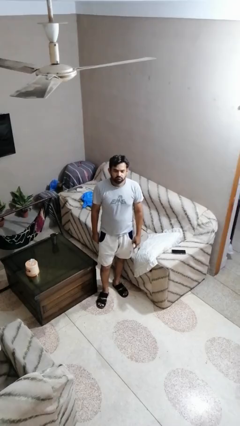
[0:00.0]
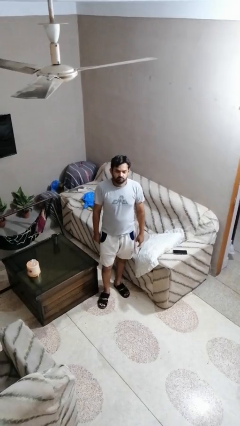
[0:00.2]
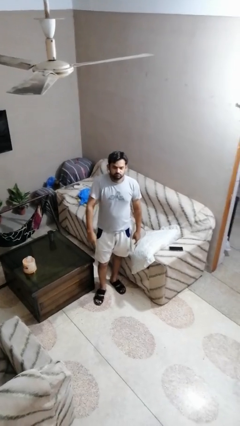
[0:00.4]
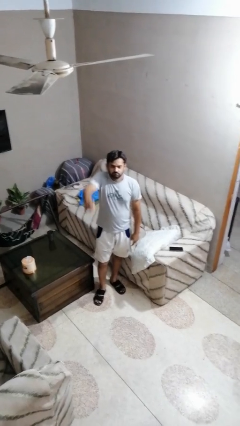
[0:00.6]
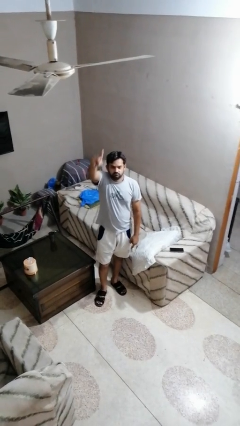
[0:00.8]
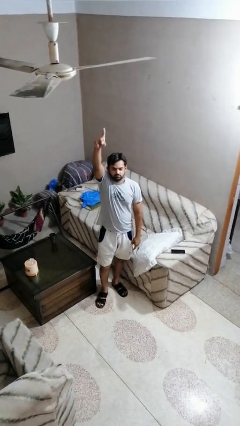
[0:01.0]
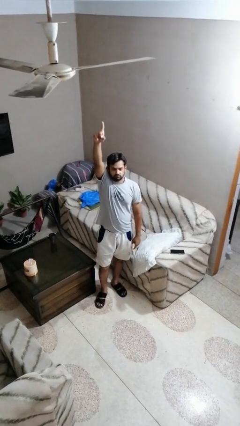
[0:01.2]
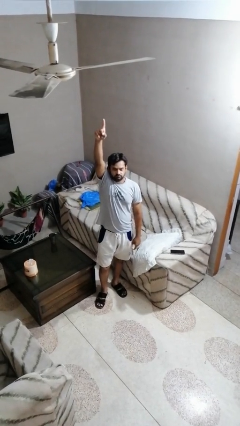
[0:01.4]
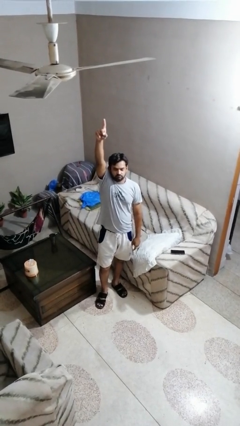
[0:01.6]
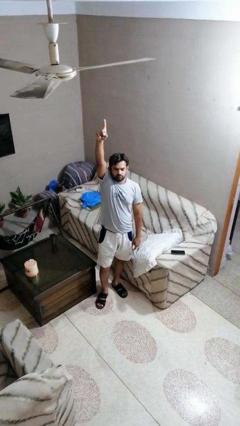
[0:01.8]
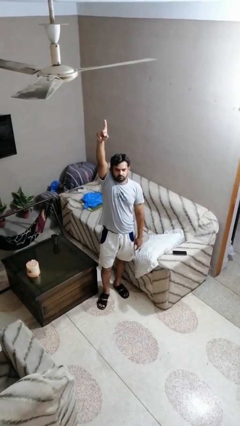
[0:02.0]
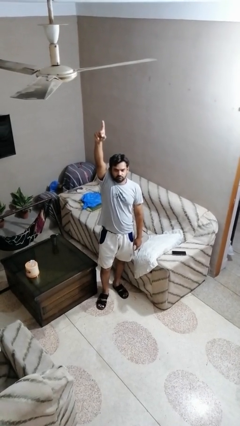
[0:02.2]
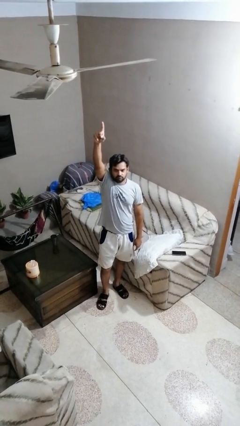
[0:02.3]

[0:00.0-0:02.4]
person gestures number one

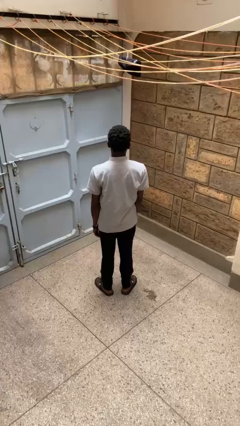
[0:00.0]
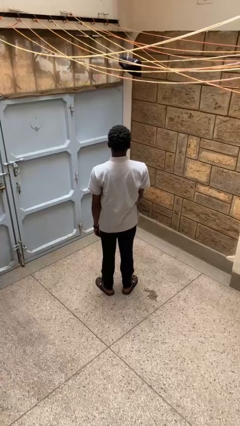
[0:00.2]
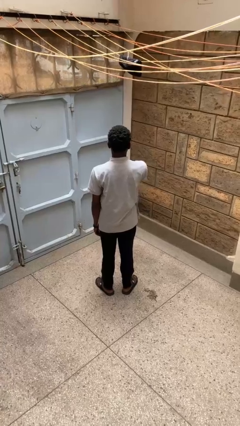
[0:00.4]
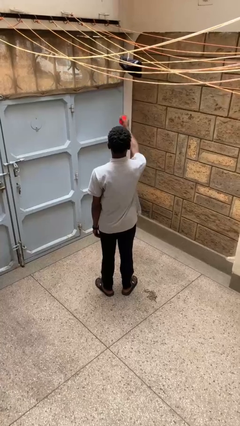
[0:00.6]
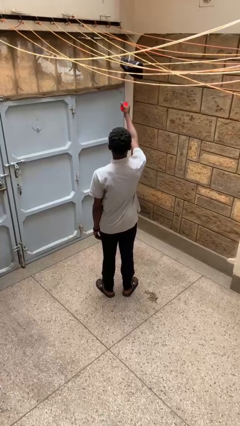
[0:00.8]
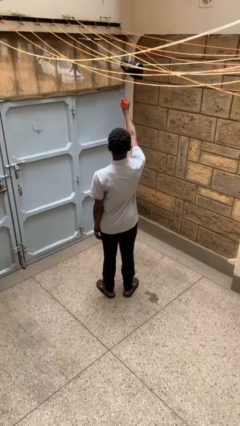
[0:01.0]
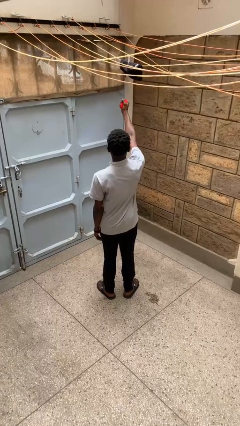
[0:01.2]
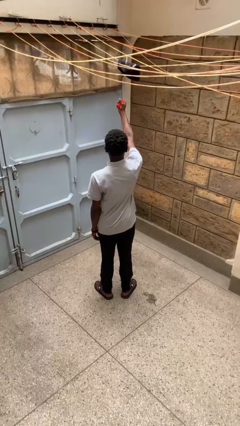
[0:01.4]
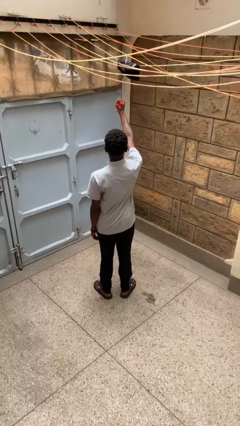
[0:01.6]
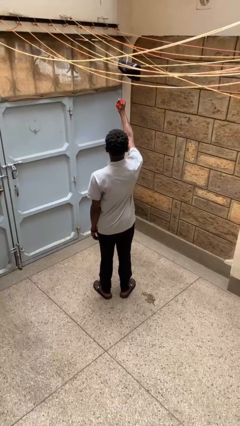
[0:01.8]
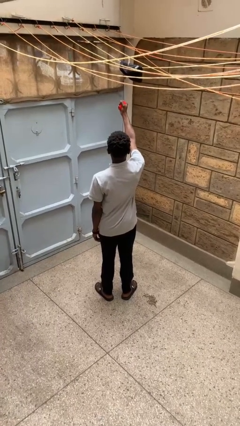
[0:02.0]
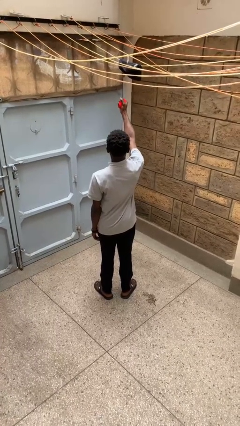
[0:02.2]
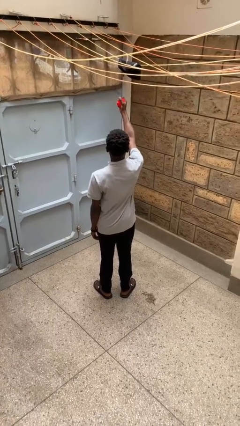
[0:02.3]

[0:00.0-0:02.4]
person squeezes object

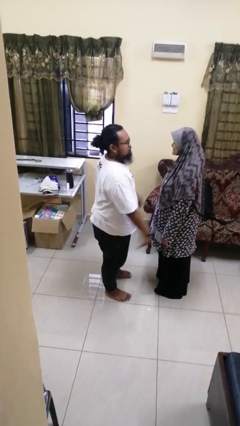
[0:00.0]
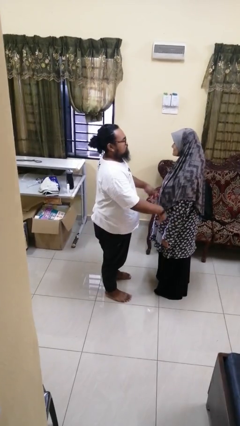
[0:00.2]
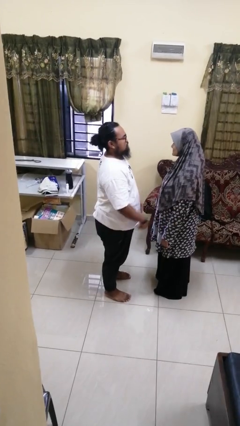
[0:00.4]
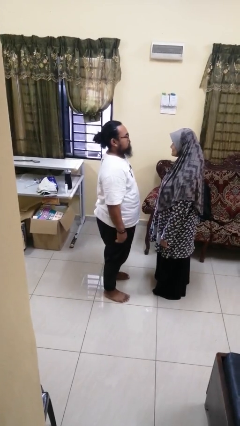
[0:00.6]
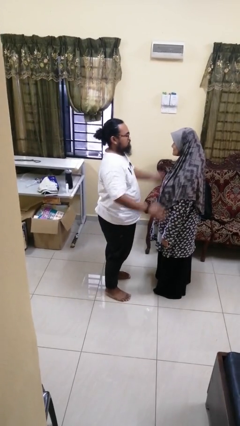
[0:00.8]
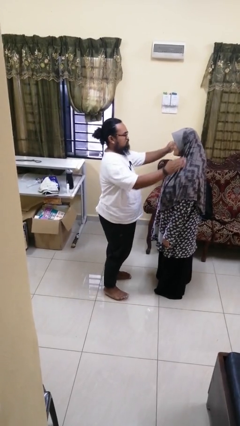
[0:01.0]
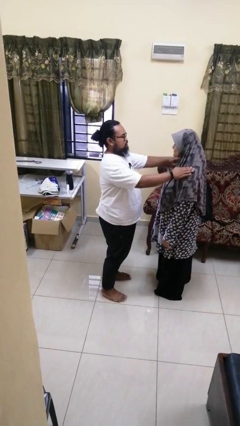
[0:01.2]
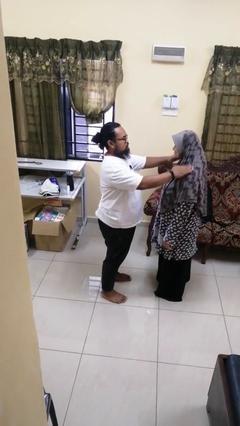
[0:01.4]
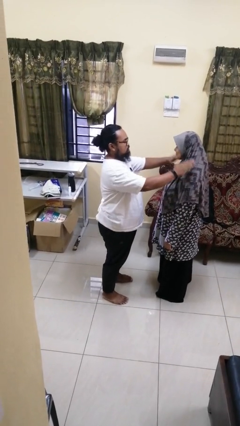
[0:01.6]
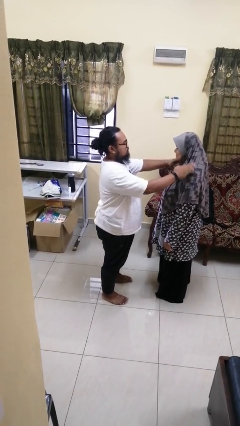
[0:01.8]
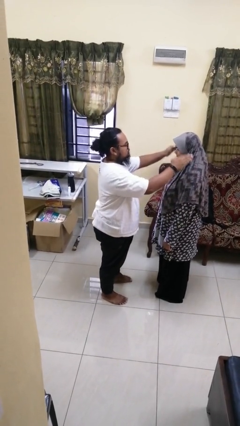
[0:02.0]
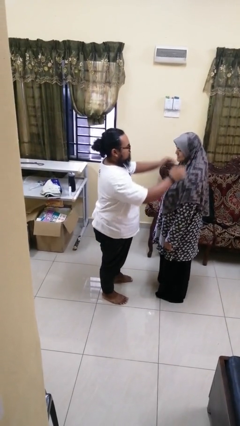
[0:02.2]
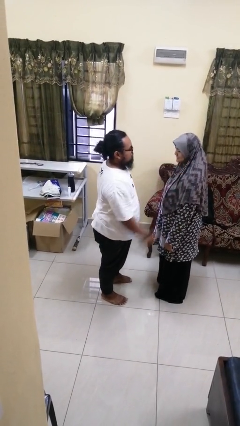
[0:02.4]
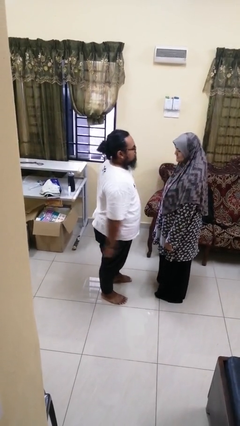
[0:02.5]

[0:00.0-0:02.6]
person pounds shoulders of person

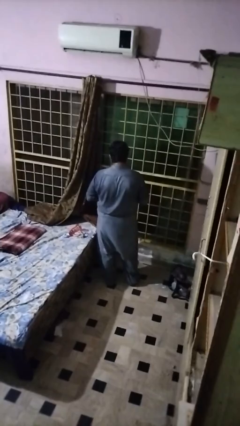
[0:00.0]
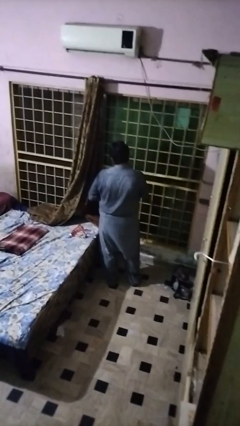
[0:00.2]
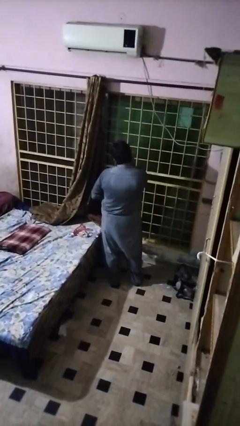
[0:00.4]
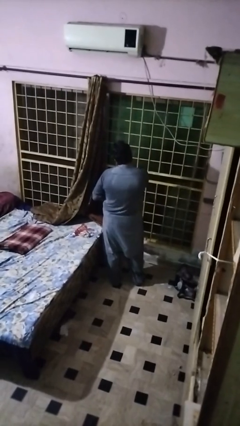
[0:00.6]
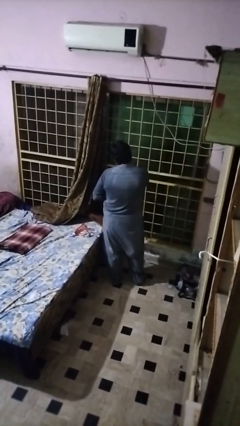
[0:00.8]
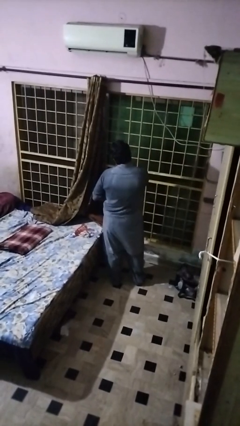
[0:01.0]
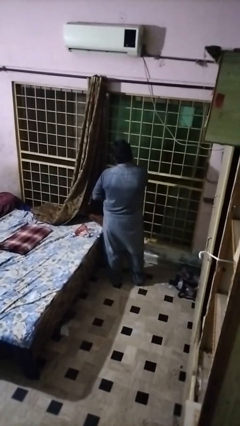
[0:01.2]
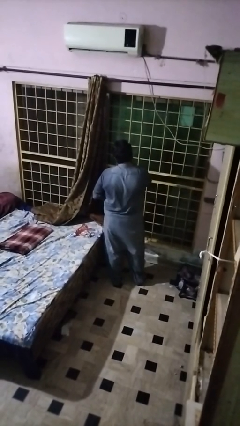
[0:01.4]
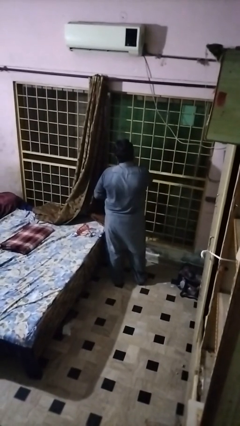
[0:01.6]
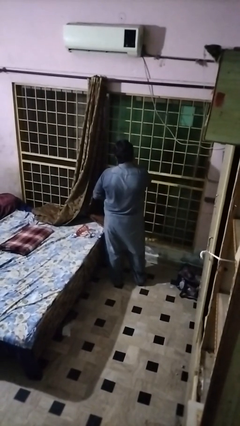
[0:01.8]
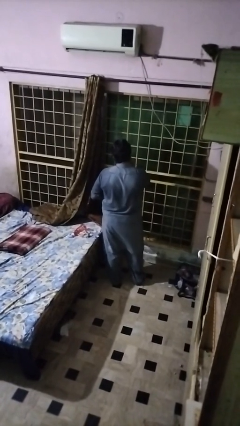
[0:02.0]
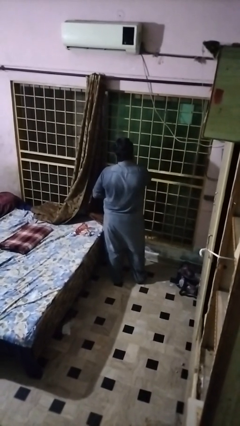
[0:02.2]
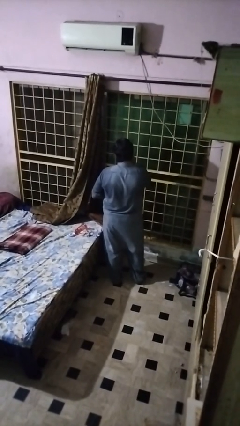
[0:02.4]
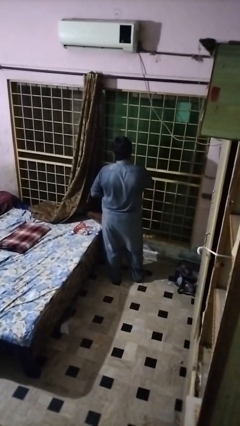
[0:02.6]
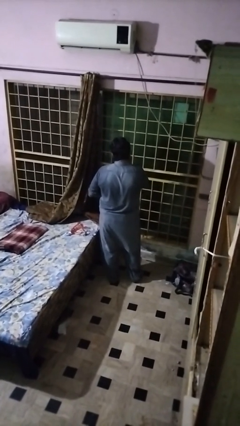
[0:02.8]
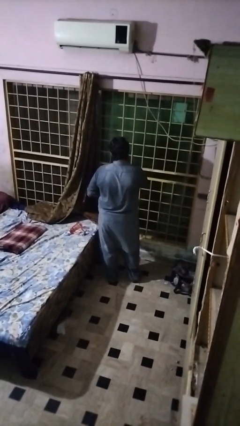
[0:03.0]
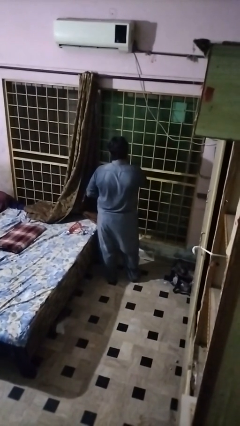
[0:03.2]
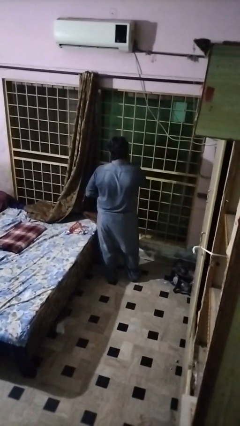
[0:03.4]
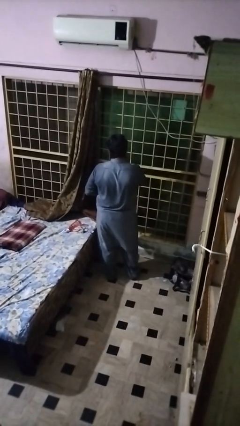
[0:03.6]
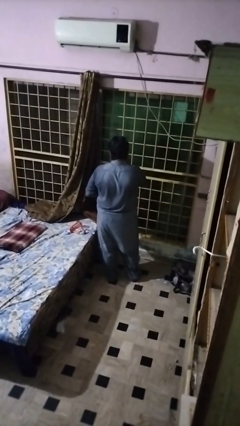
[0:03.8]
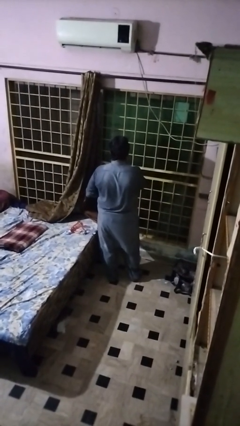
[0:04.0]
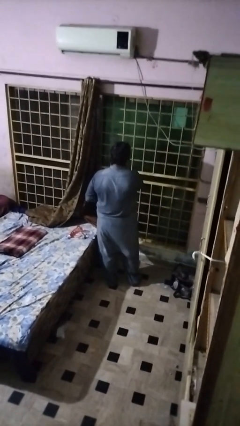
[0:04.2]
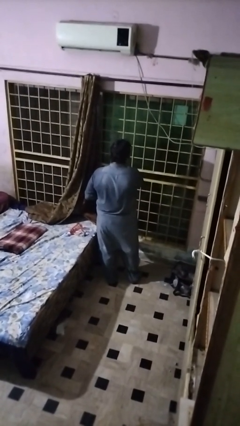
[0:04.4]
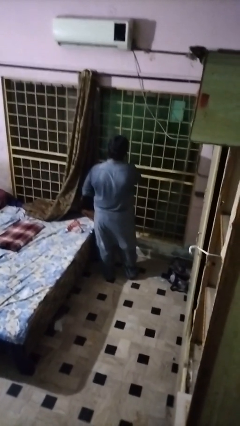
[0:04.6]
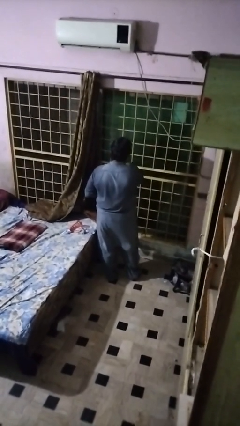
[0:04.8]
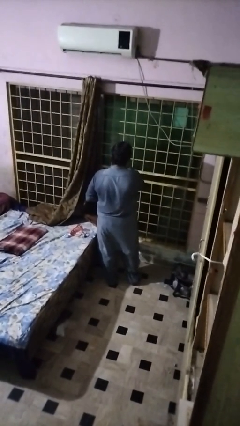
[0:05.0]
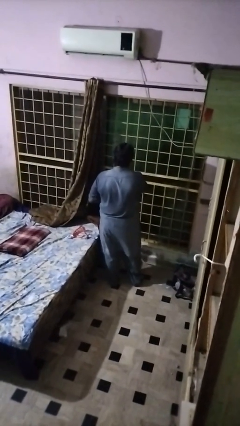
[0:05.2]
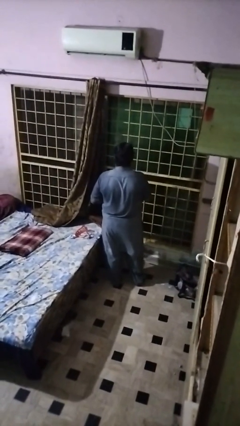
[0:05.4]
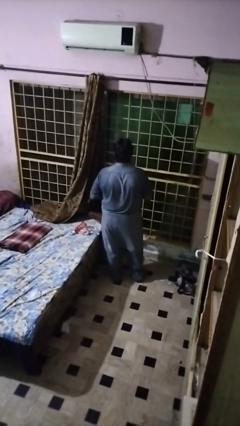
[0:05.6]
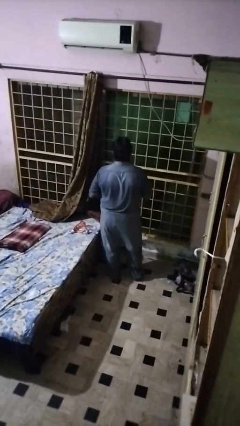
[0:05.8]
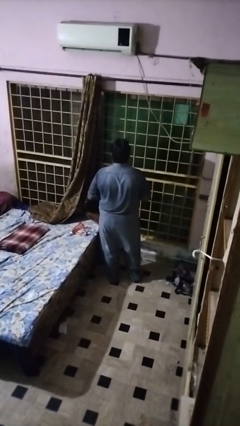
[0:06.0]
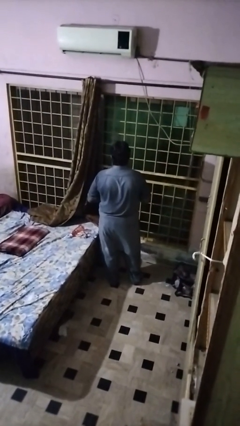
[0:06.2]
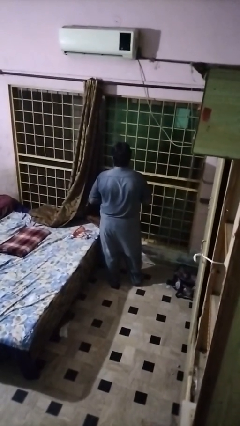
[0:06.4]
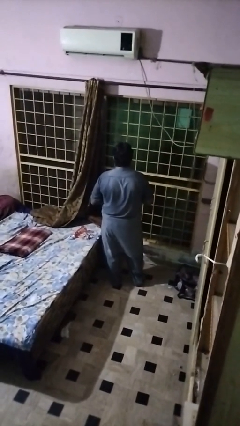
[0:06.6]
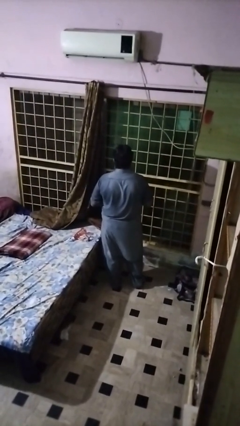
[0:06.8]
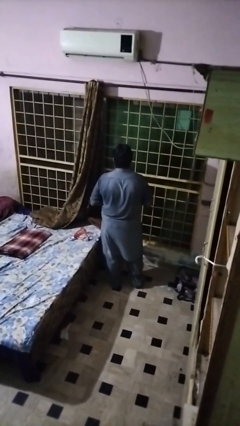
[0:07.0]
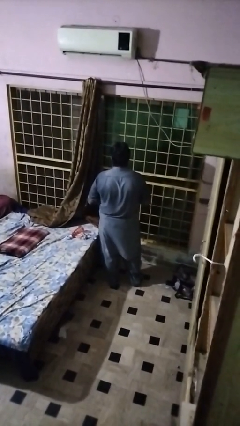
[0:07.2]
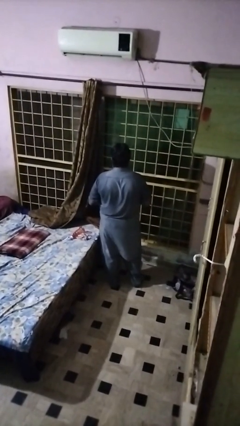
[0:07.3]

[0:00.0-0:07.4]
person applies shaving cream

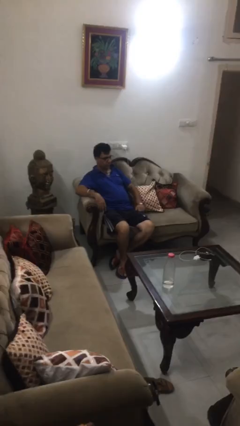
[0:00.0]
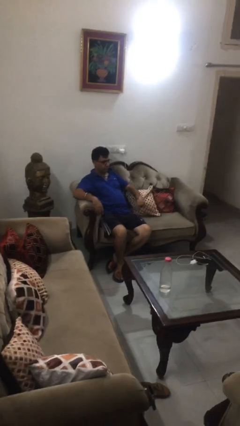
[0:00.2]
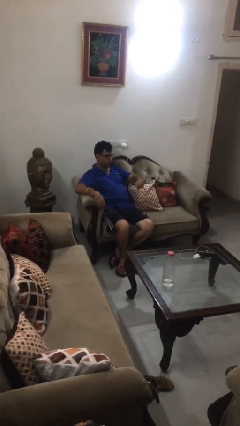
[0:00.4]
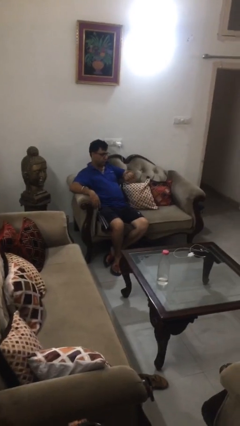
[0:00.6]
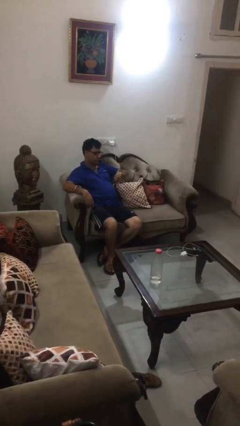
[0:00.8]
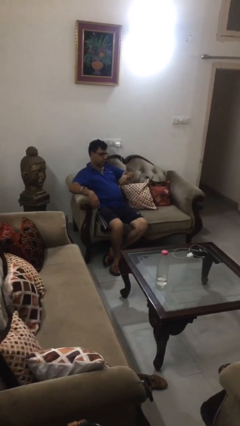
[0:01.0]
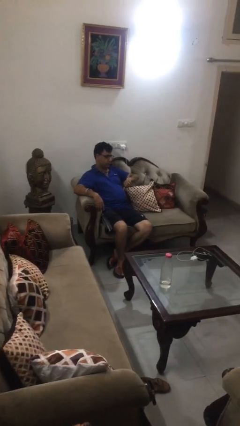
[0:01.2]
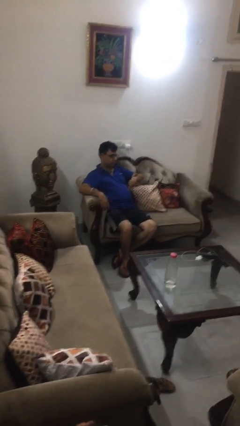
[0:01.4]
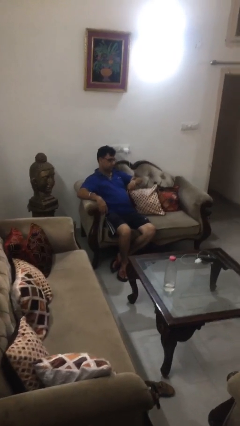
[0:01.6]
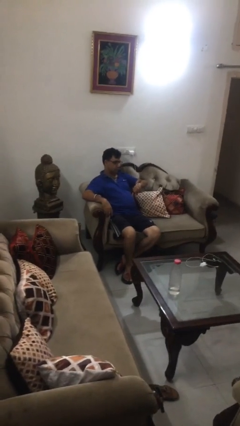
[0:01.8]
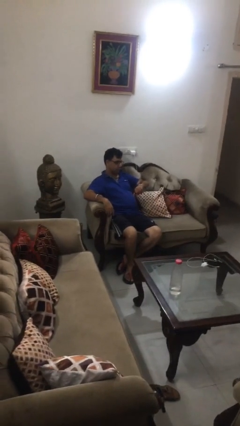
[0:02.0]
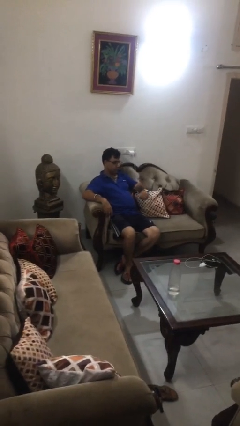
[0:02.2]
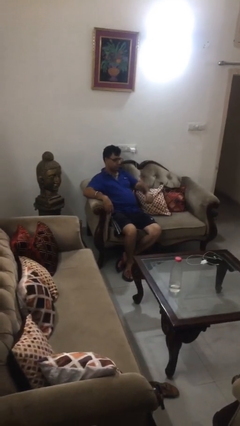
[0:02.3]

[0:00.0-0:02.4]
person looks at wristwatch
